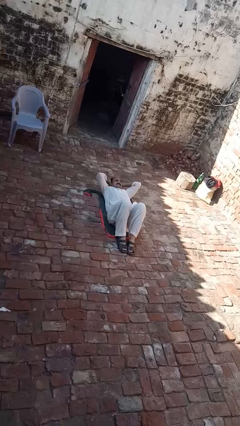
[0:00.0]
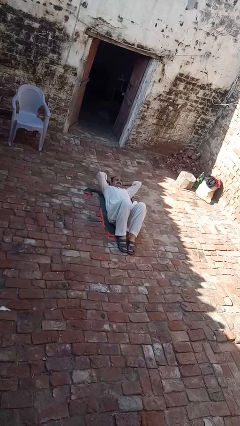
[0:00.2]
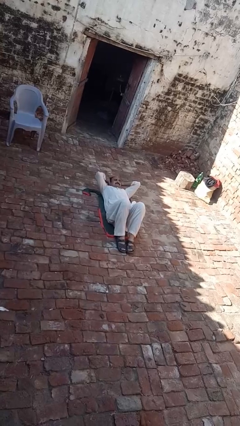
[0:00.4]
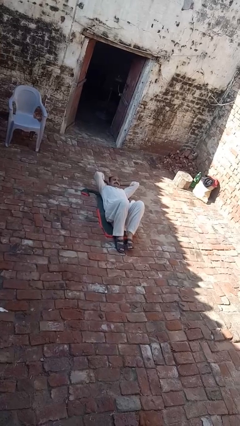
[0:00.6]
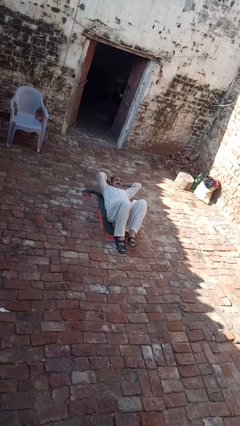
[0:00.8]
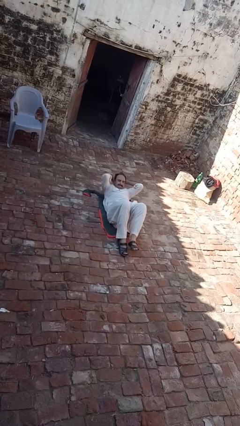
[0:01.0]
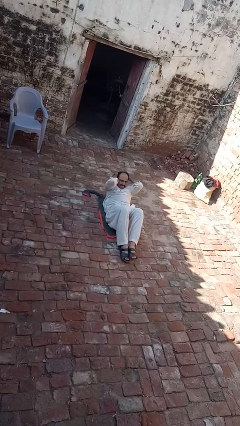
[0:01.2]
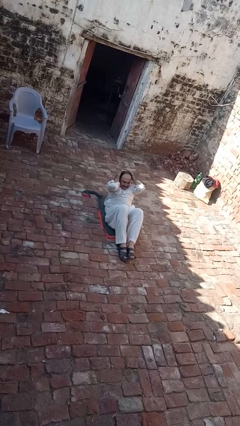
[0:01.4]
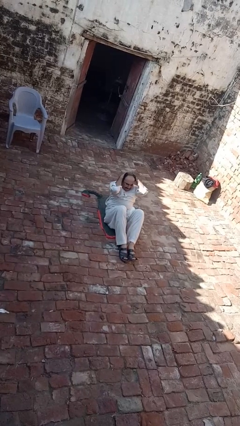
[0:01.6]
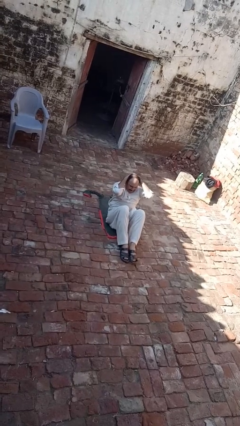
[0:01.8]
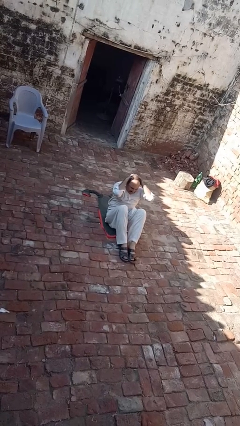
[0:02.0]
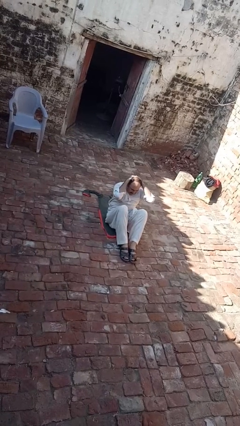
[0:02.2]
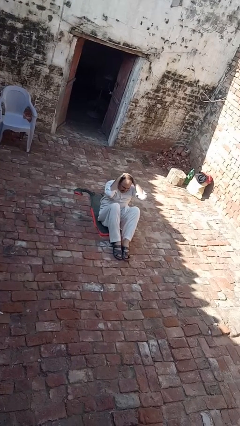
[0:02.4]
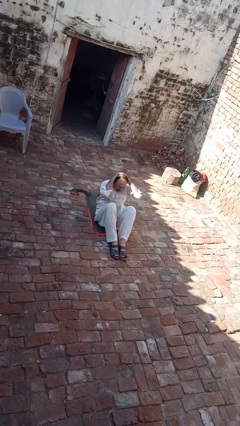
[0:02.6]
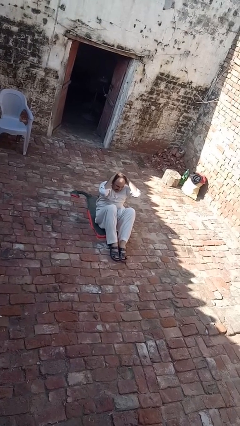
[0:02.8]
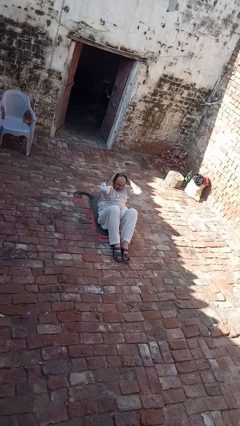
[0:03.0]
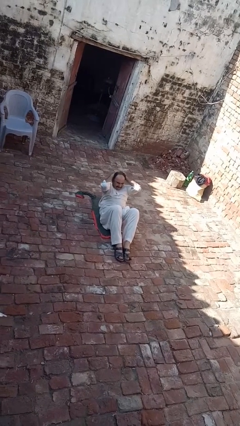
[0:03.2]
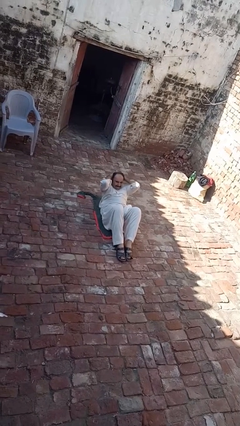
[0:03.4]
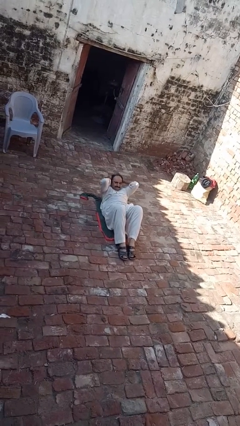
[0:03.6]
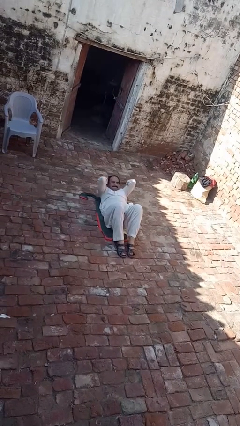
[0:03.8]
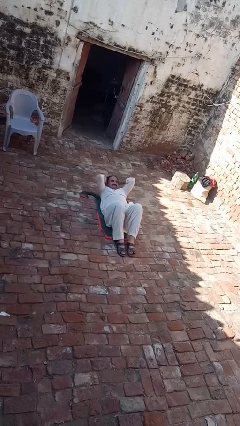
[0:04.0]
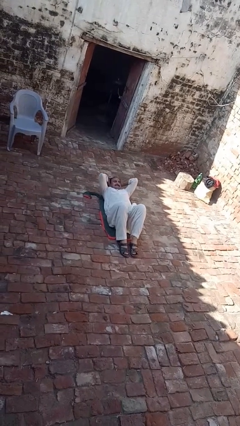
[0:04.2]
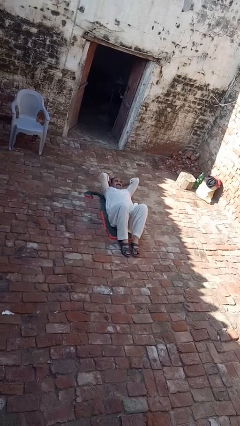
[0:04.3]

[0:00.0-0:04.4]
person exercises with situp

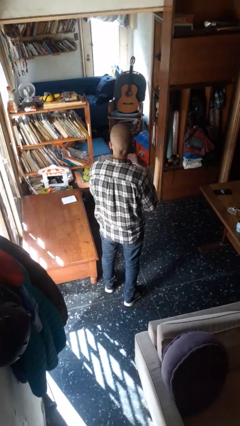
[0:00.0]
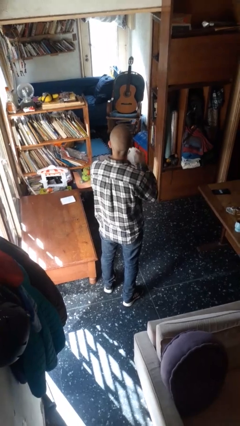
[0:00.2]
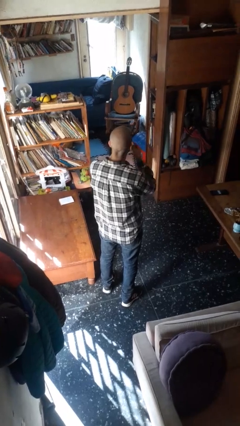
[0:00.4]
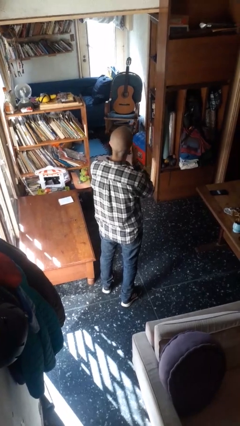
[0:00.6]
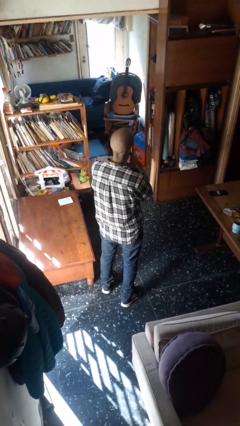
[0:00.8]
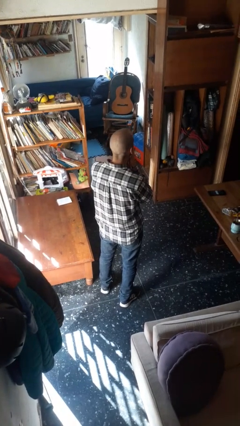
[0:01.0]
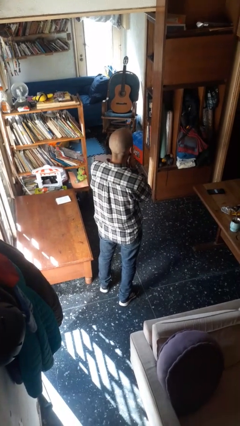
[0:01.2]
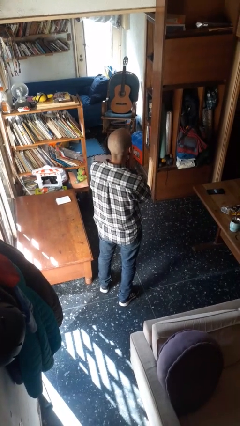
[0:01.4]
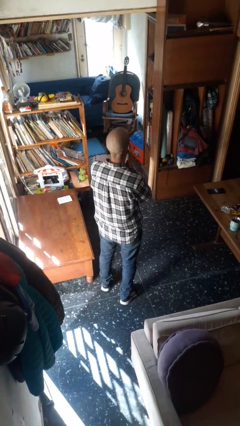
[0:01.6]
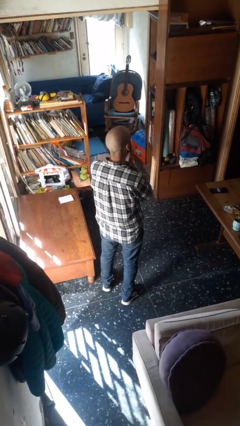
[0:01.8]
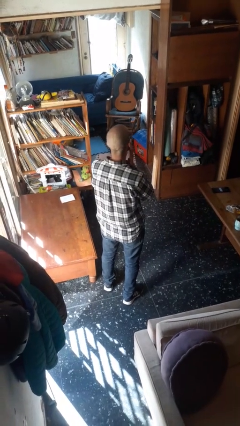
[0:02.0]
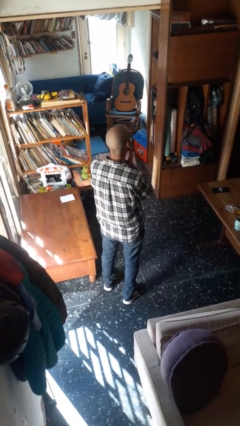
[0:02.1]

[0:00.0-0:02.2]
person wipes mouth with napkin

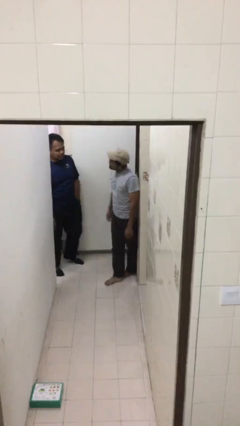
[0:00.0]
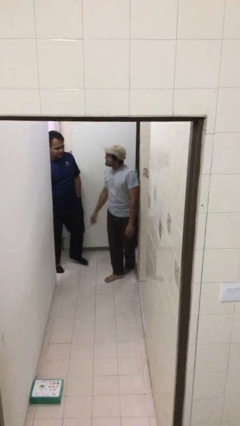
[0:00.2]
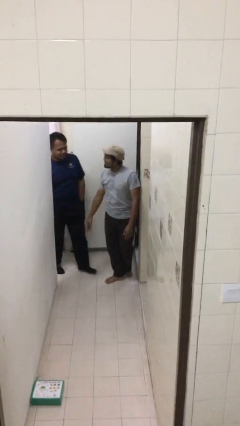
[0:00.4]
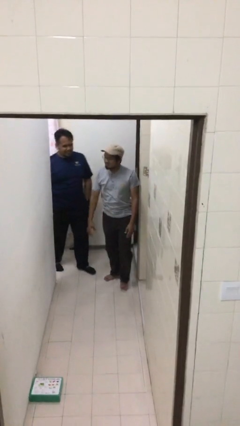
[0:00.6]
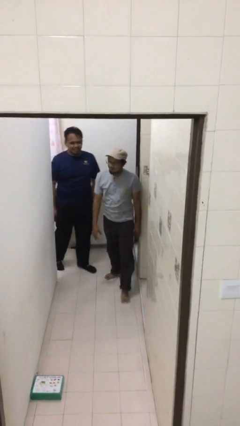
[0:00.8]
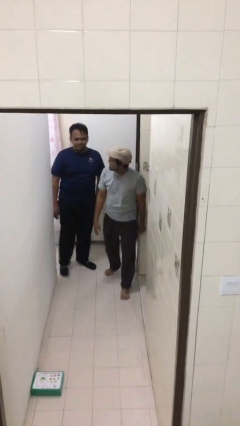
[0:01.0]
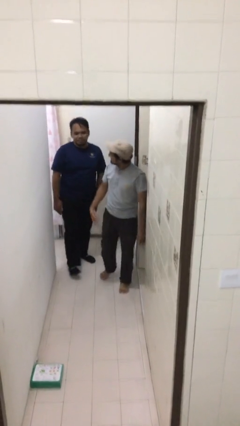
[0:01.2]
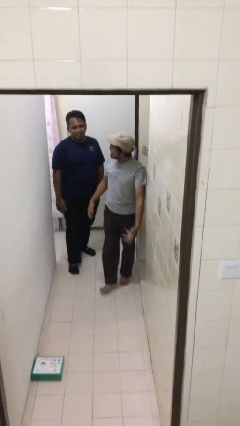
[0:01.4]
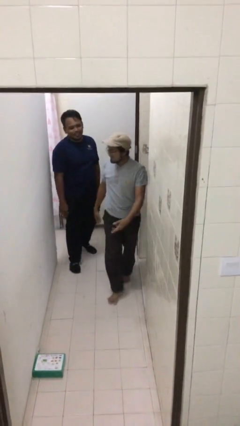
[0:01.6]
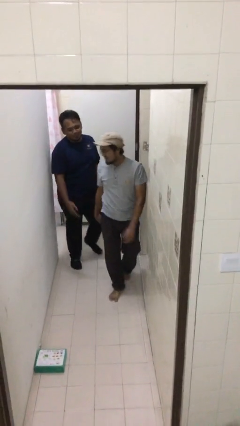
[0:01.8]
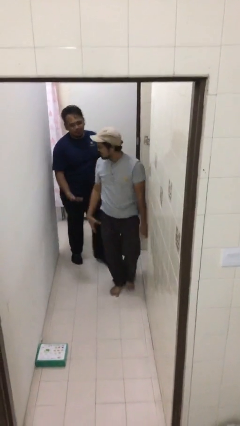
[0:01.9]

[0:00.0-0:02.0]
person talks to person

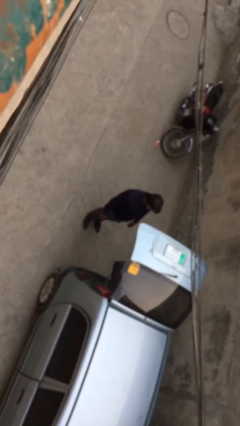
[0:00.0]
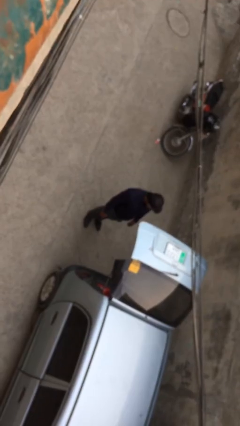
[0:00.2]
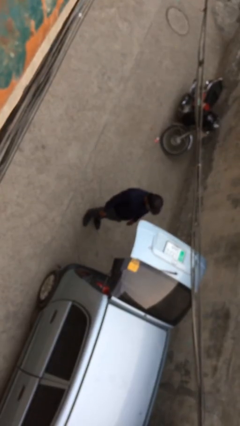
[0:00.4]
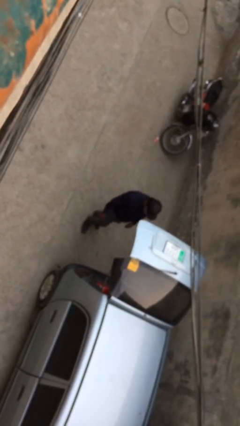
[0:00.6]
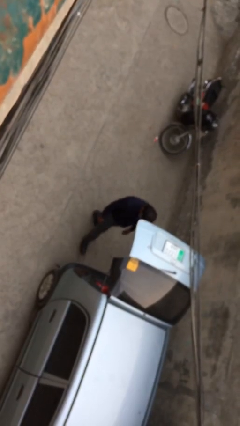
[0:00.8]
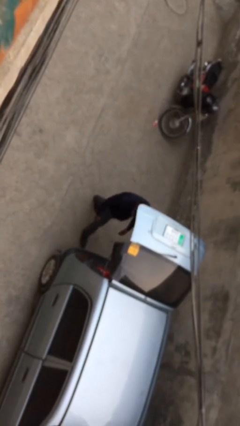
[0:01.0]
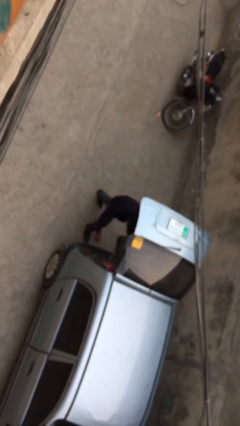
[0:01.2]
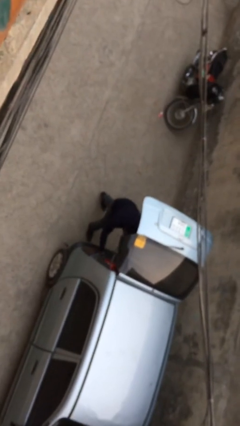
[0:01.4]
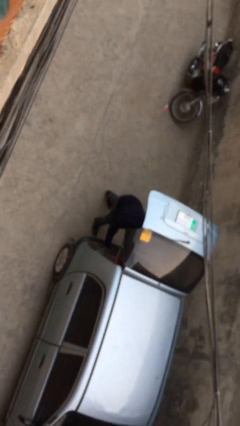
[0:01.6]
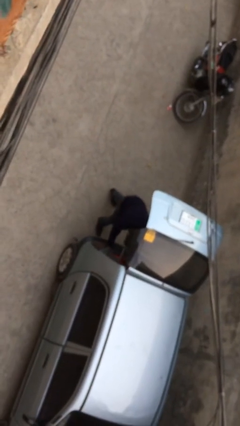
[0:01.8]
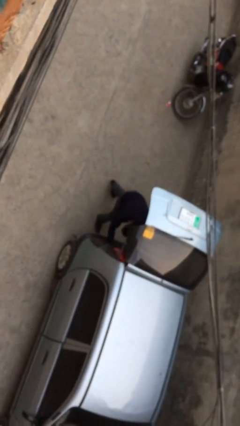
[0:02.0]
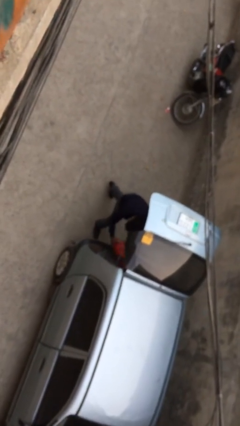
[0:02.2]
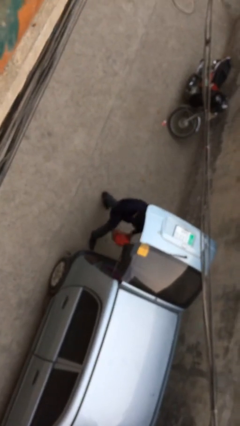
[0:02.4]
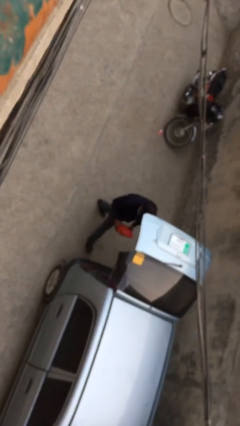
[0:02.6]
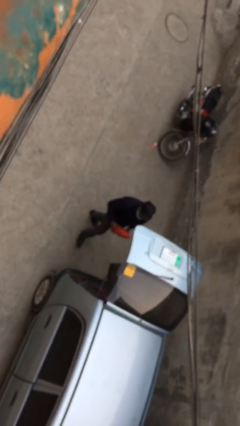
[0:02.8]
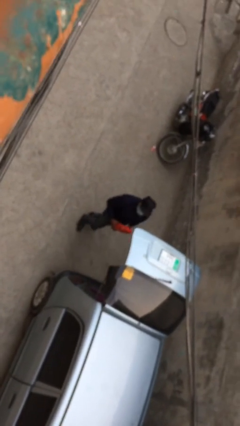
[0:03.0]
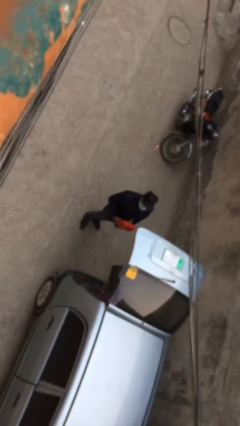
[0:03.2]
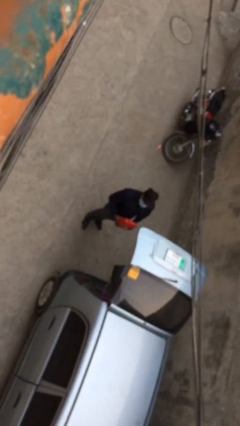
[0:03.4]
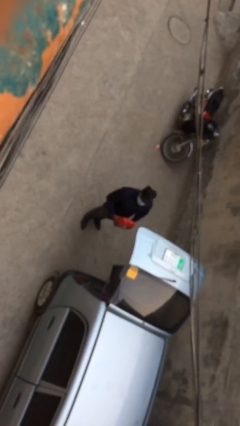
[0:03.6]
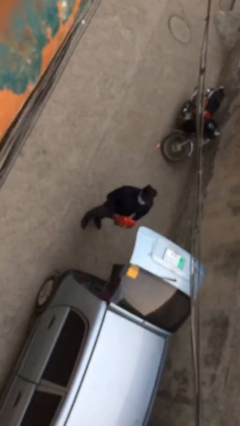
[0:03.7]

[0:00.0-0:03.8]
person unloads car

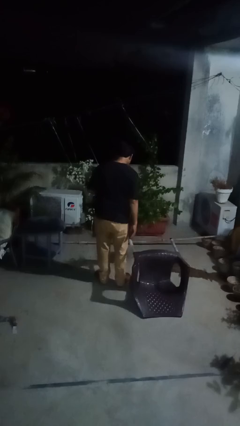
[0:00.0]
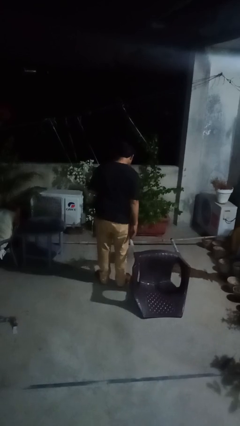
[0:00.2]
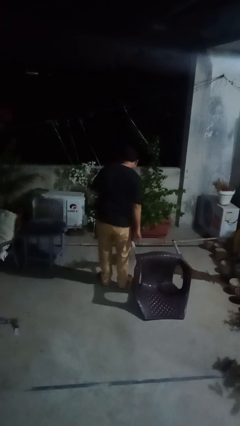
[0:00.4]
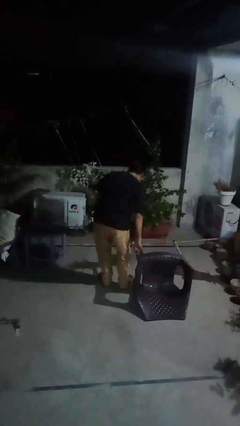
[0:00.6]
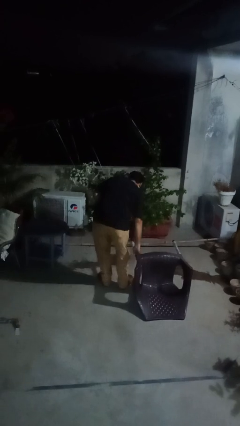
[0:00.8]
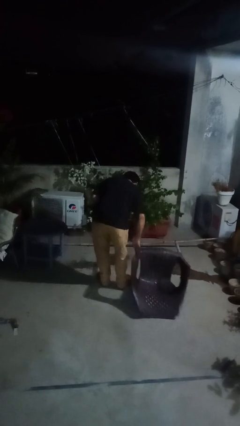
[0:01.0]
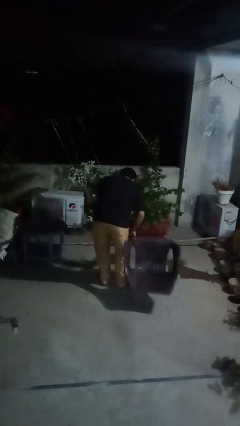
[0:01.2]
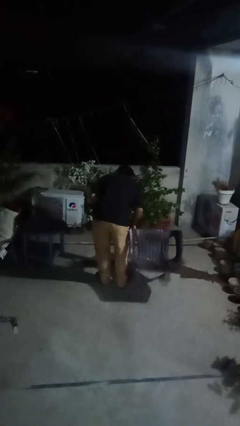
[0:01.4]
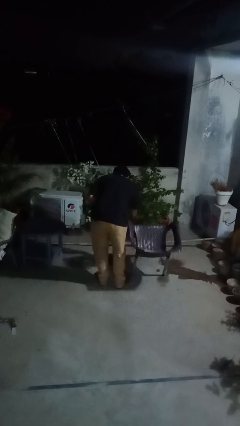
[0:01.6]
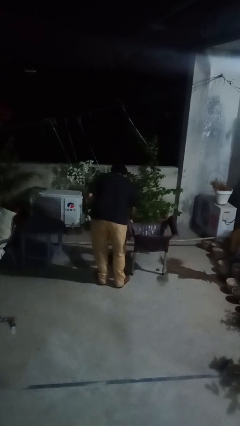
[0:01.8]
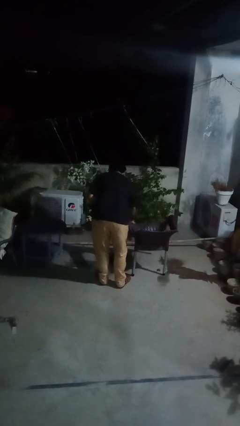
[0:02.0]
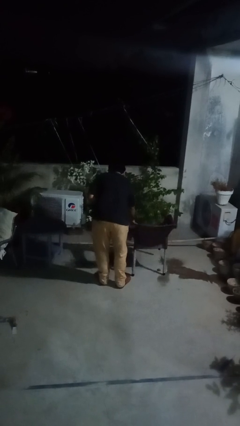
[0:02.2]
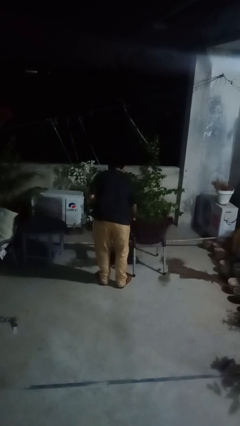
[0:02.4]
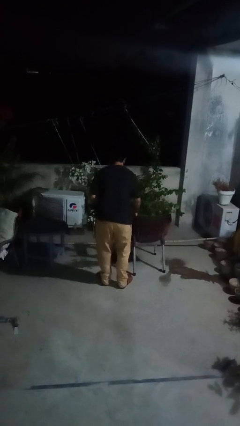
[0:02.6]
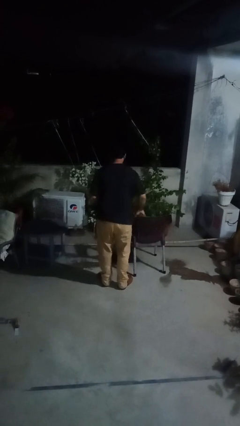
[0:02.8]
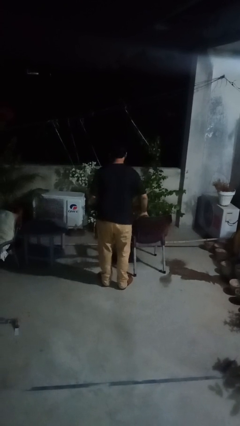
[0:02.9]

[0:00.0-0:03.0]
person sets upright furniture

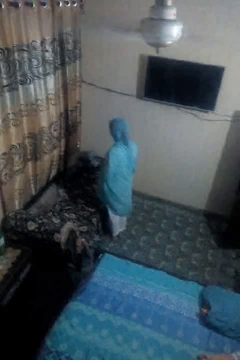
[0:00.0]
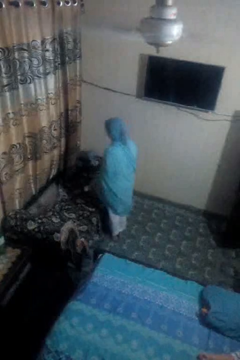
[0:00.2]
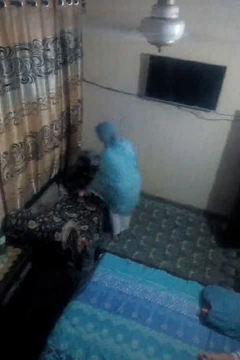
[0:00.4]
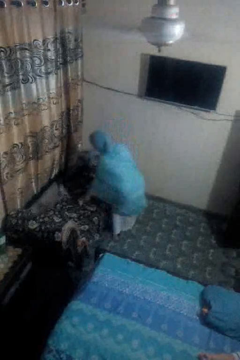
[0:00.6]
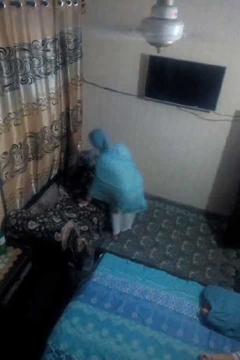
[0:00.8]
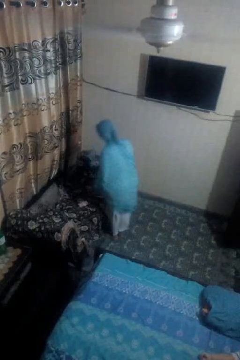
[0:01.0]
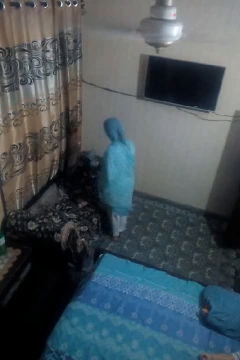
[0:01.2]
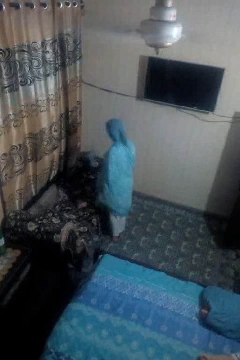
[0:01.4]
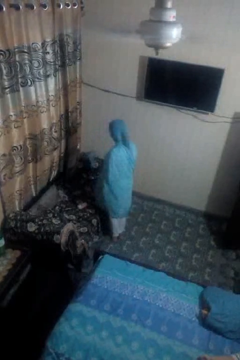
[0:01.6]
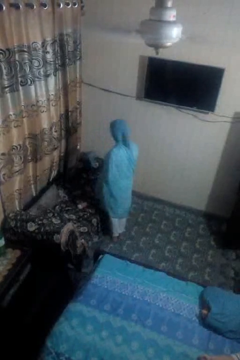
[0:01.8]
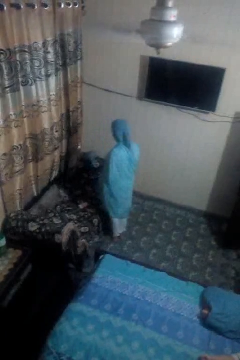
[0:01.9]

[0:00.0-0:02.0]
person puts down object on couch
